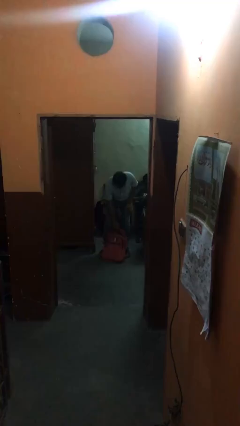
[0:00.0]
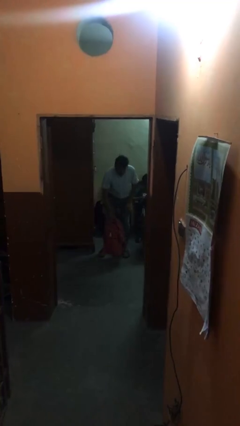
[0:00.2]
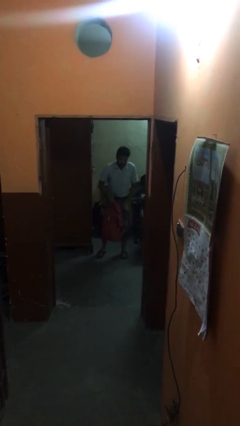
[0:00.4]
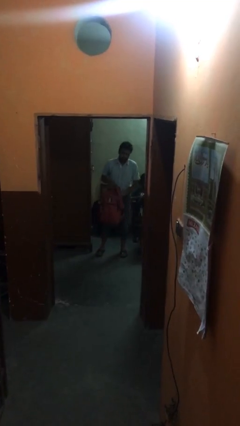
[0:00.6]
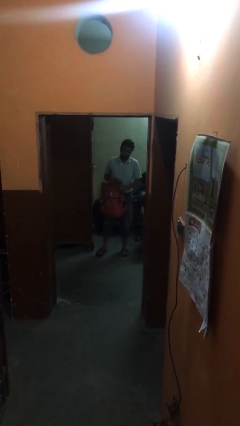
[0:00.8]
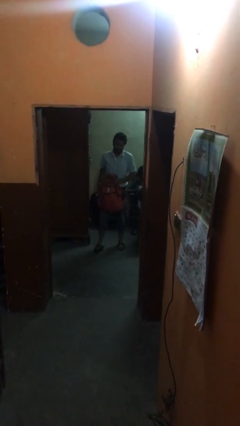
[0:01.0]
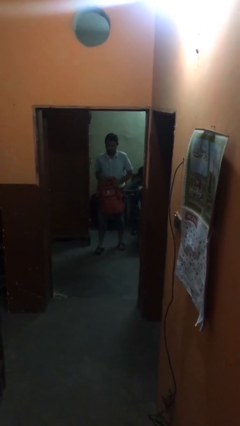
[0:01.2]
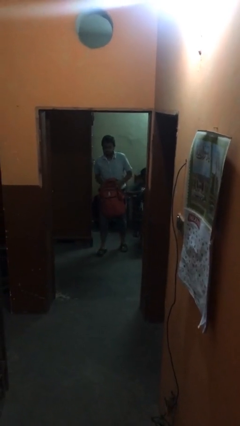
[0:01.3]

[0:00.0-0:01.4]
person picks up object from floor

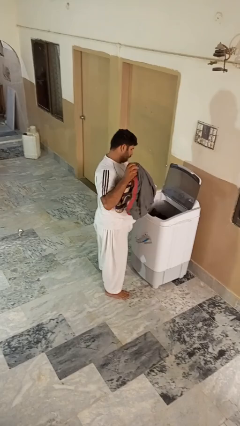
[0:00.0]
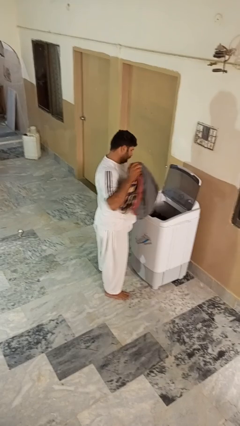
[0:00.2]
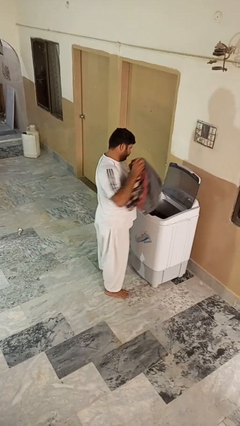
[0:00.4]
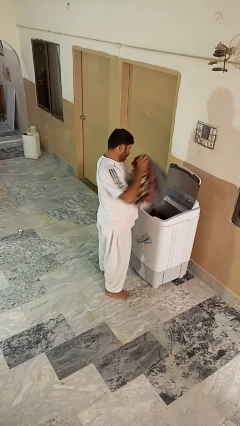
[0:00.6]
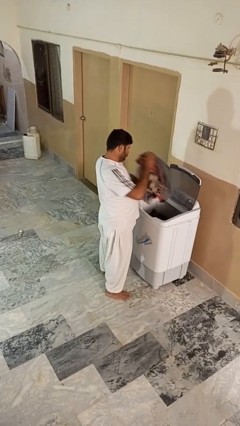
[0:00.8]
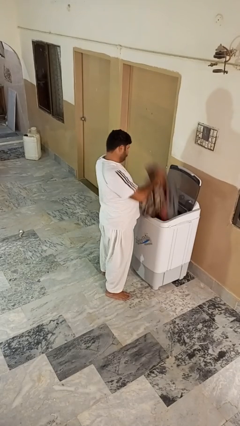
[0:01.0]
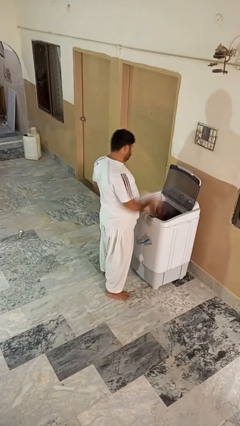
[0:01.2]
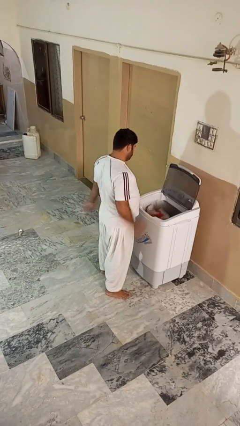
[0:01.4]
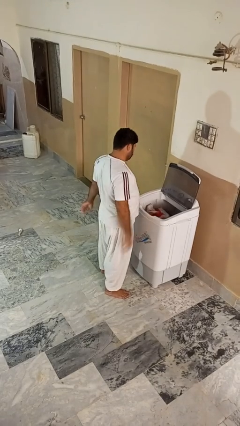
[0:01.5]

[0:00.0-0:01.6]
person loads clotheswasher

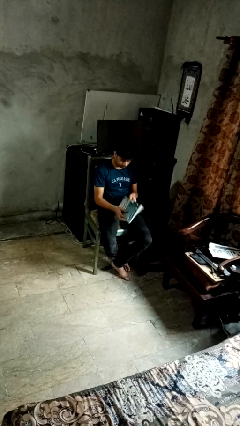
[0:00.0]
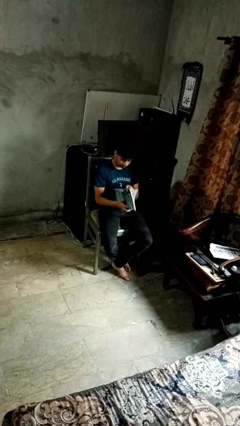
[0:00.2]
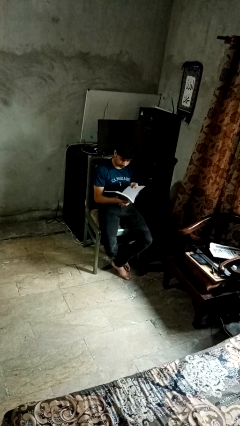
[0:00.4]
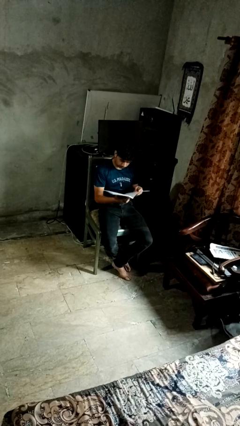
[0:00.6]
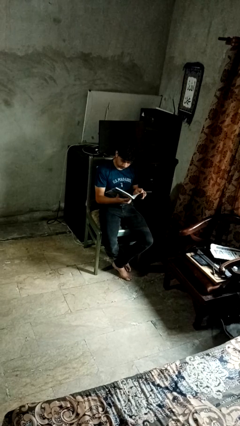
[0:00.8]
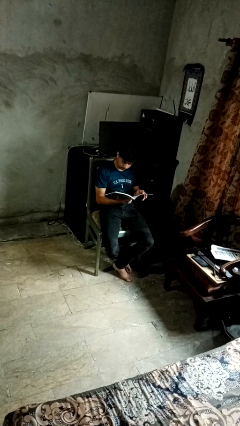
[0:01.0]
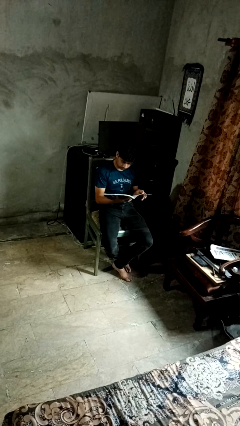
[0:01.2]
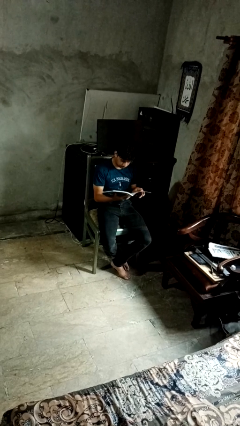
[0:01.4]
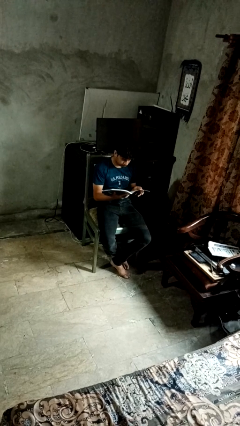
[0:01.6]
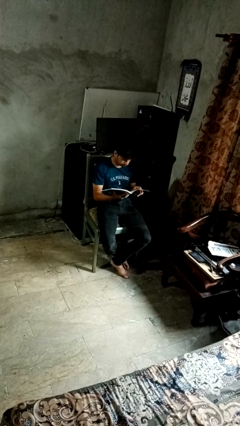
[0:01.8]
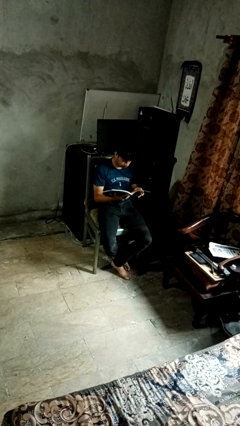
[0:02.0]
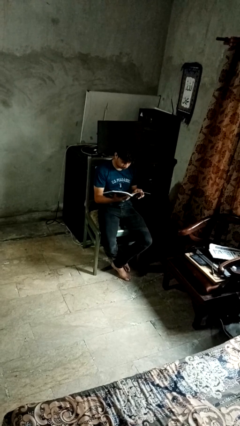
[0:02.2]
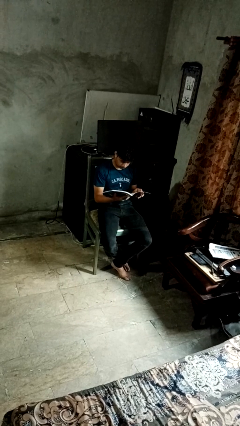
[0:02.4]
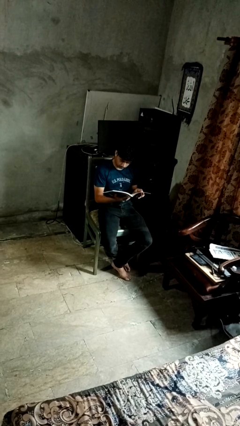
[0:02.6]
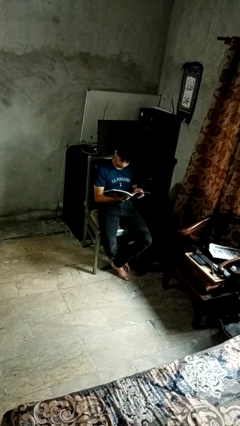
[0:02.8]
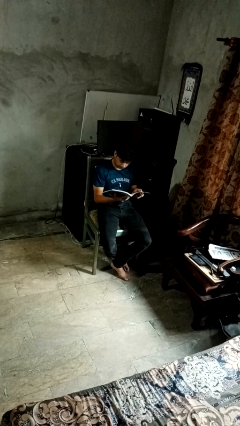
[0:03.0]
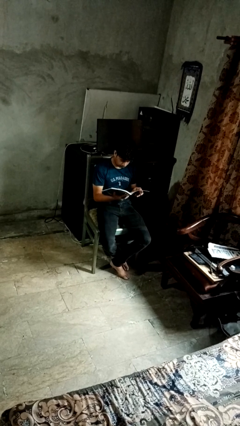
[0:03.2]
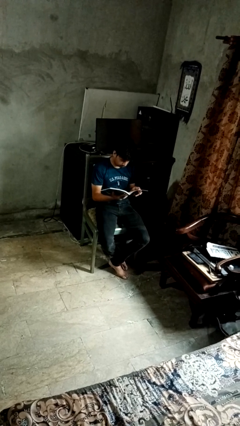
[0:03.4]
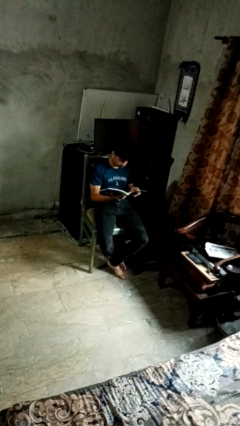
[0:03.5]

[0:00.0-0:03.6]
person reads book

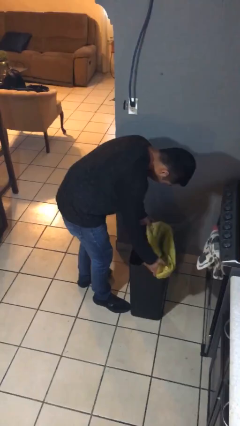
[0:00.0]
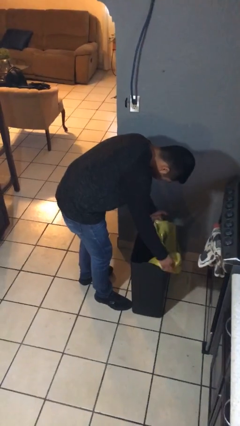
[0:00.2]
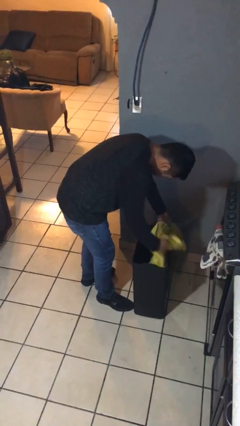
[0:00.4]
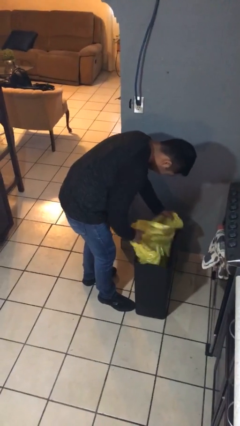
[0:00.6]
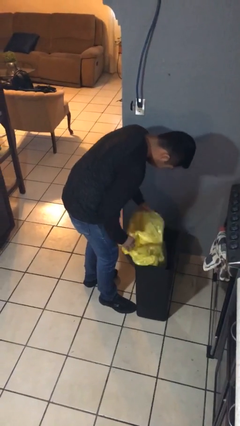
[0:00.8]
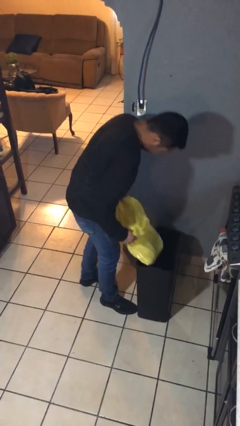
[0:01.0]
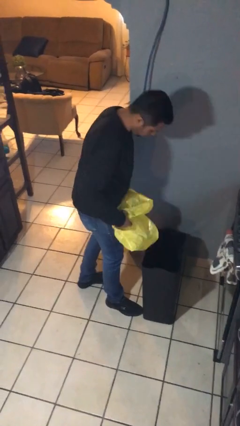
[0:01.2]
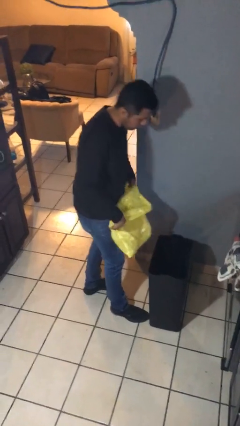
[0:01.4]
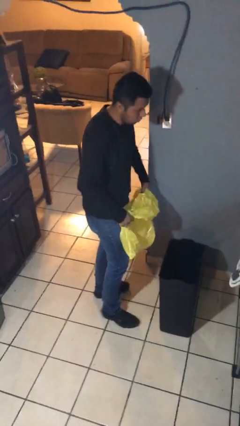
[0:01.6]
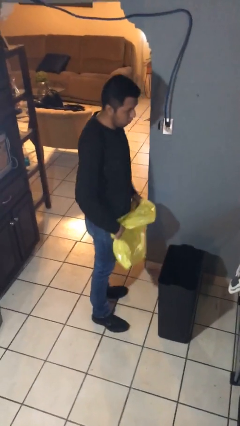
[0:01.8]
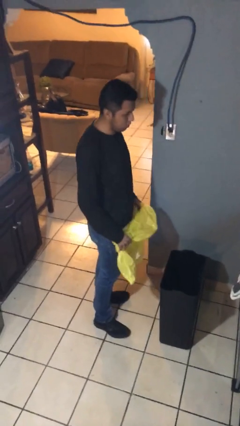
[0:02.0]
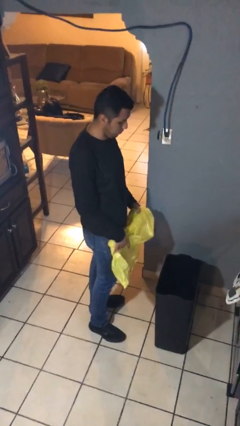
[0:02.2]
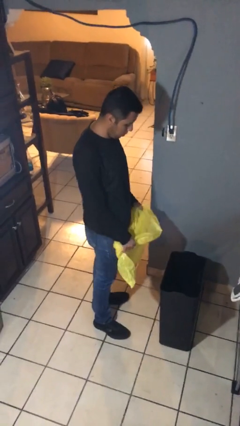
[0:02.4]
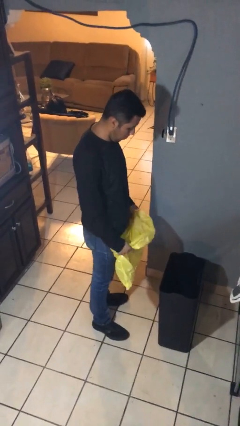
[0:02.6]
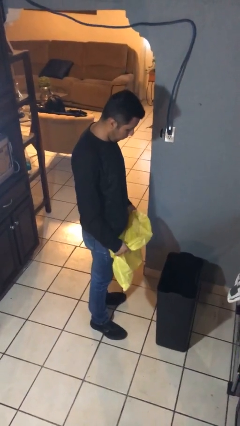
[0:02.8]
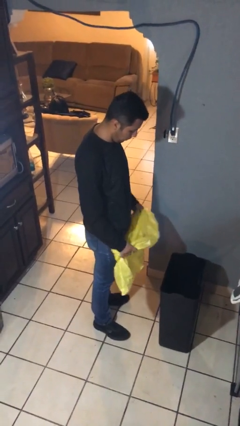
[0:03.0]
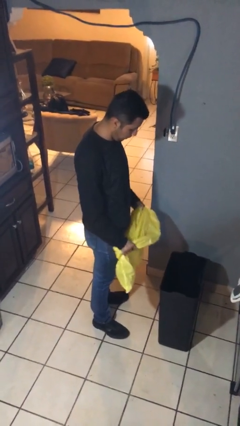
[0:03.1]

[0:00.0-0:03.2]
person removes trashbag from trashcan

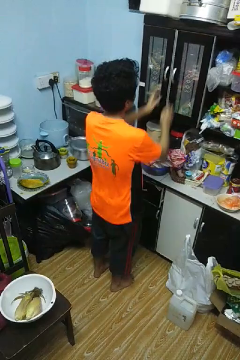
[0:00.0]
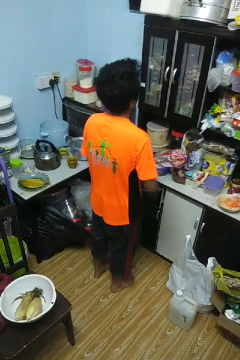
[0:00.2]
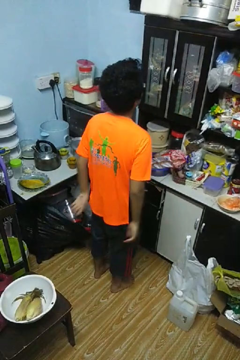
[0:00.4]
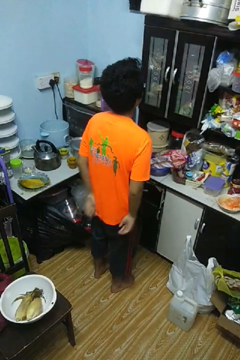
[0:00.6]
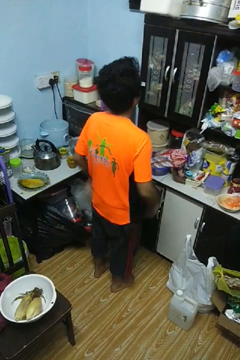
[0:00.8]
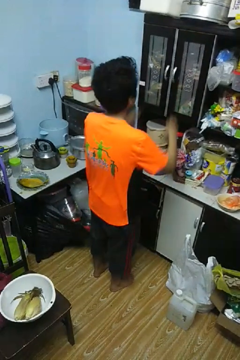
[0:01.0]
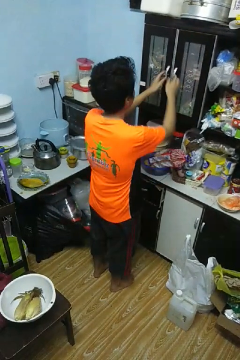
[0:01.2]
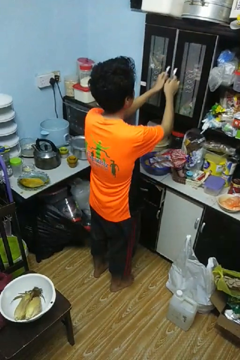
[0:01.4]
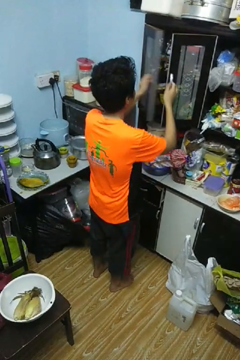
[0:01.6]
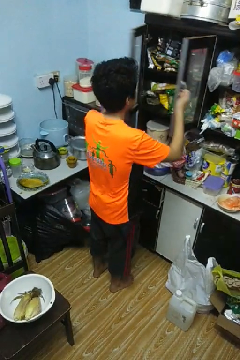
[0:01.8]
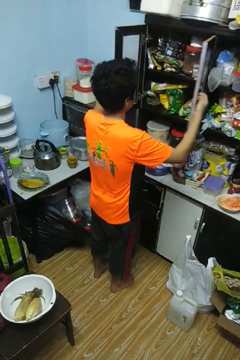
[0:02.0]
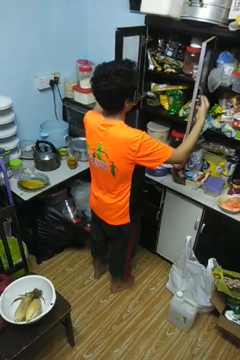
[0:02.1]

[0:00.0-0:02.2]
person opens cabinet

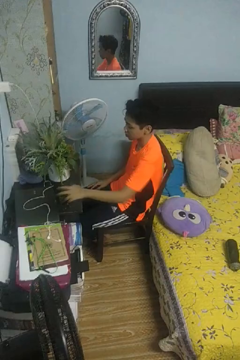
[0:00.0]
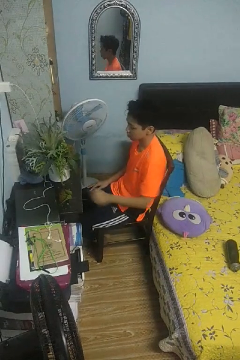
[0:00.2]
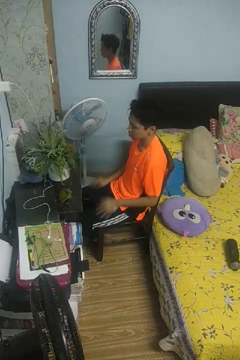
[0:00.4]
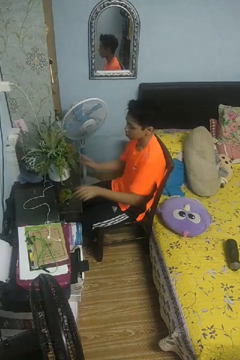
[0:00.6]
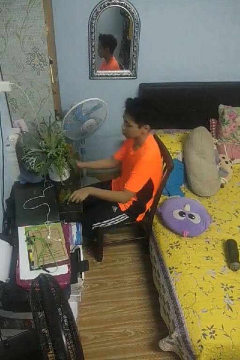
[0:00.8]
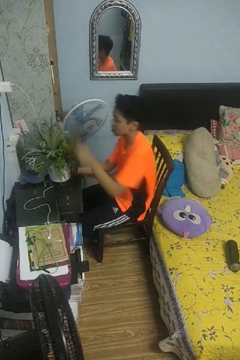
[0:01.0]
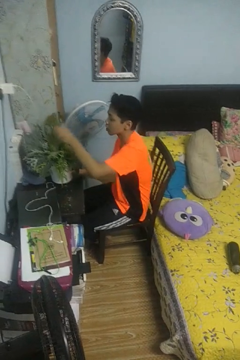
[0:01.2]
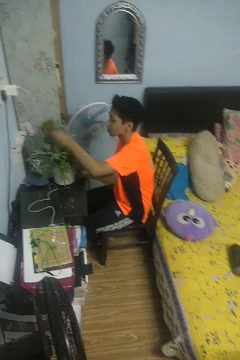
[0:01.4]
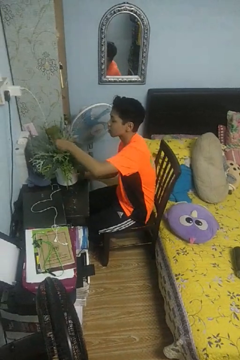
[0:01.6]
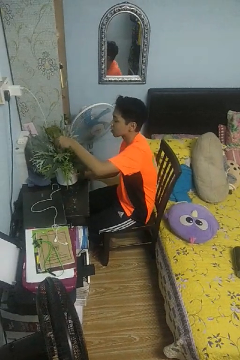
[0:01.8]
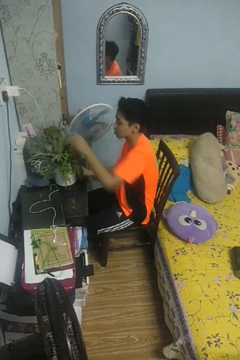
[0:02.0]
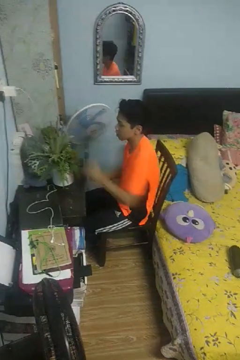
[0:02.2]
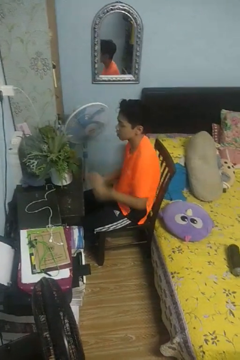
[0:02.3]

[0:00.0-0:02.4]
person arranges flowers in vase

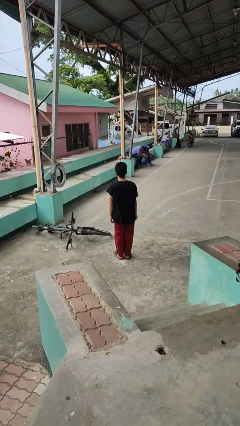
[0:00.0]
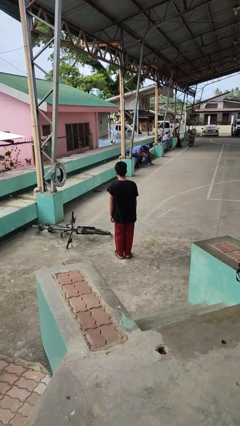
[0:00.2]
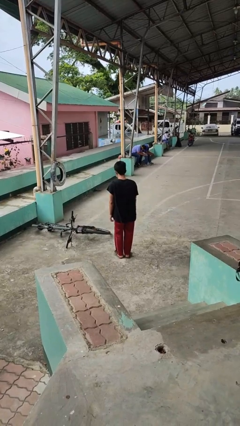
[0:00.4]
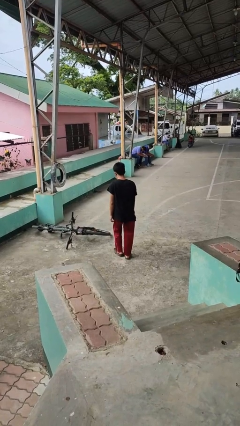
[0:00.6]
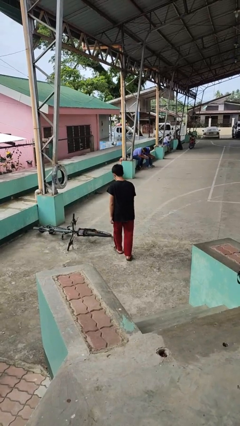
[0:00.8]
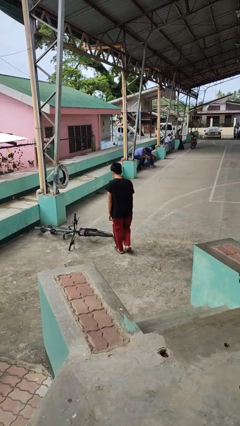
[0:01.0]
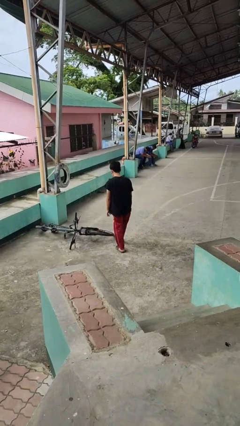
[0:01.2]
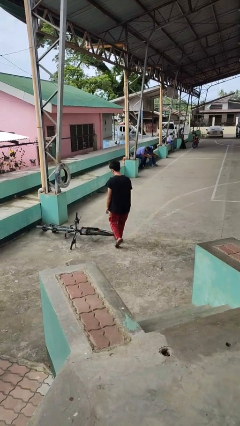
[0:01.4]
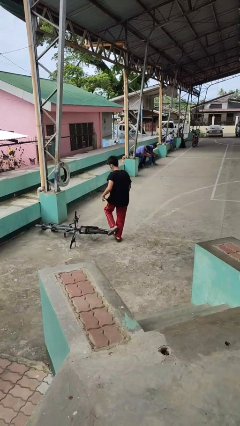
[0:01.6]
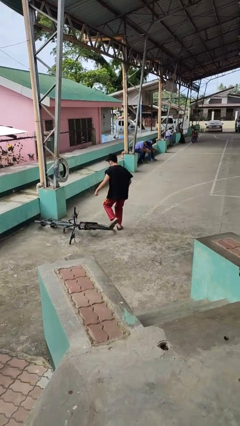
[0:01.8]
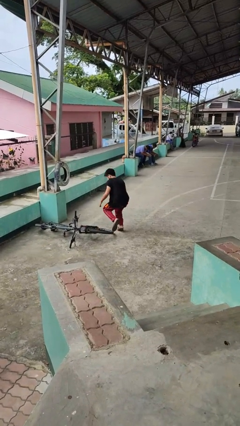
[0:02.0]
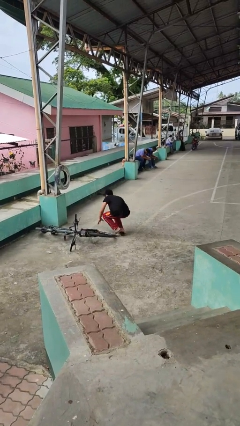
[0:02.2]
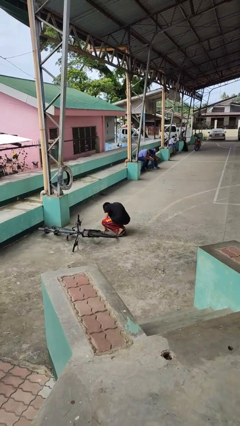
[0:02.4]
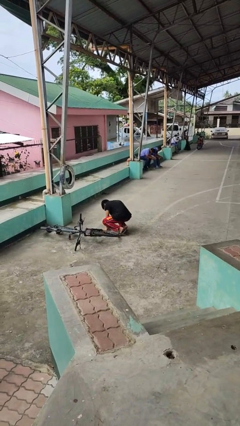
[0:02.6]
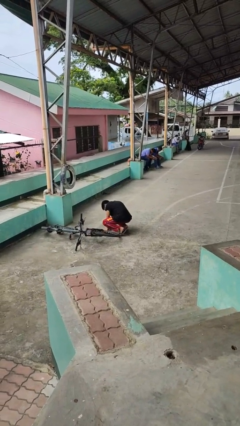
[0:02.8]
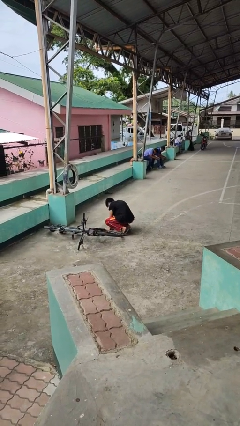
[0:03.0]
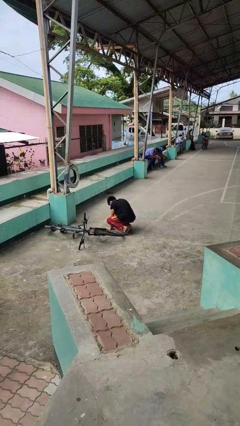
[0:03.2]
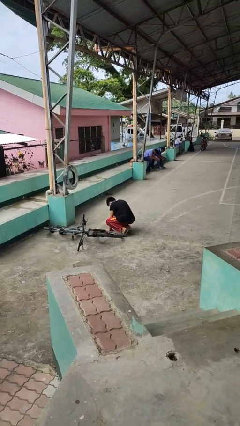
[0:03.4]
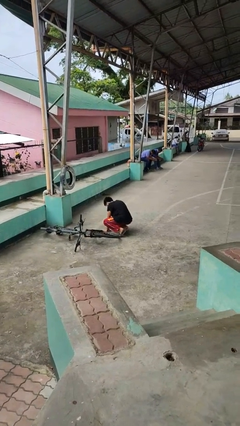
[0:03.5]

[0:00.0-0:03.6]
person trips on object on floor
